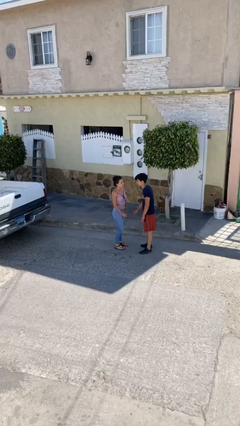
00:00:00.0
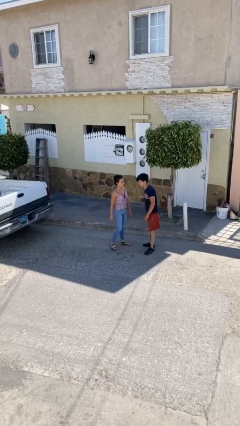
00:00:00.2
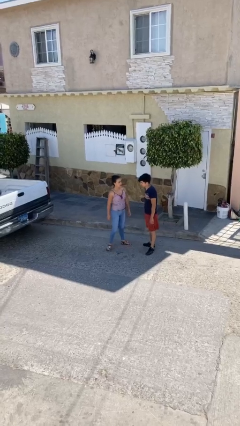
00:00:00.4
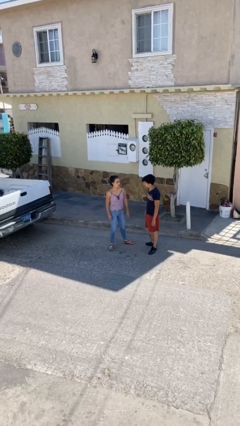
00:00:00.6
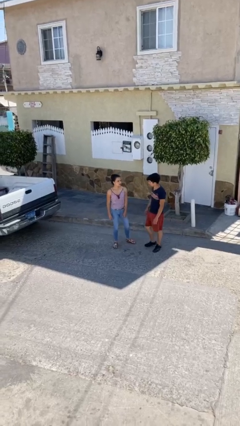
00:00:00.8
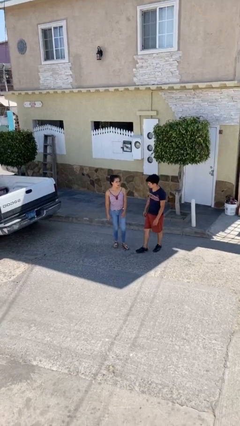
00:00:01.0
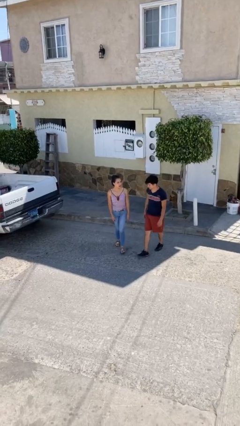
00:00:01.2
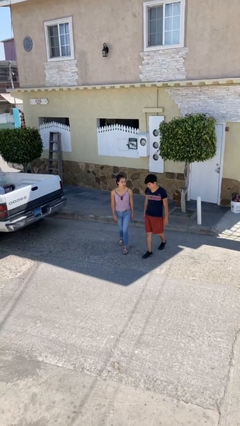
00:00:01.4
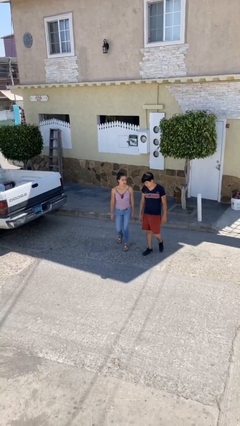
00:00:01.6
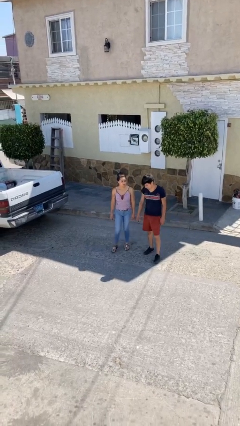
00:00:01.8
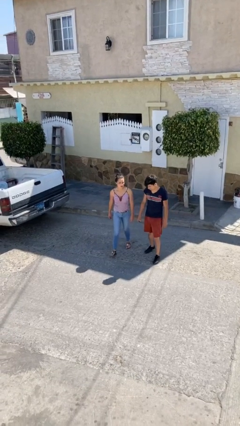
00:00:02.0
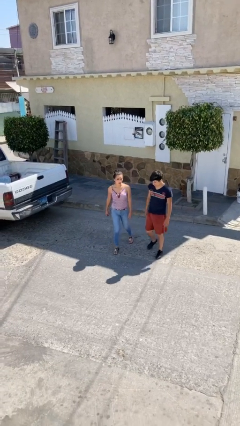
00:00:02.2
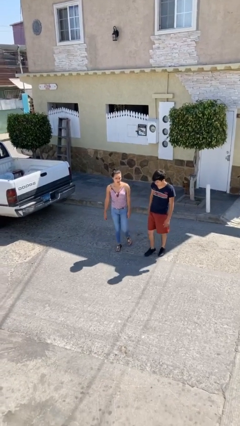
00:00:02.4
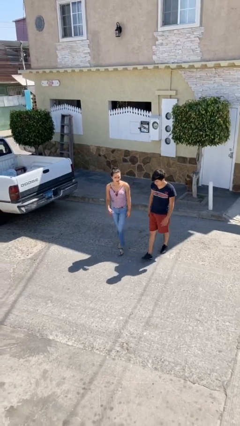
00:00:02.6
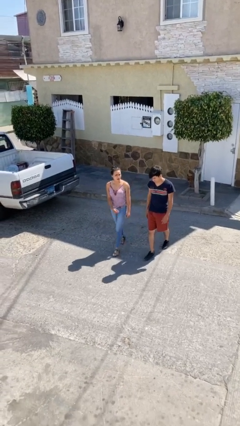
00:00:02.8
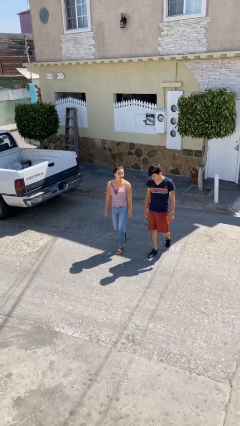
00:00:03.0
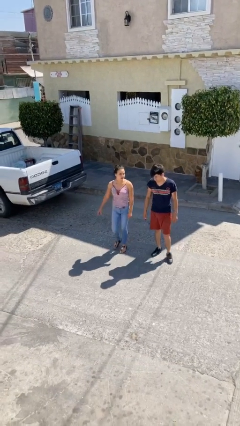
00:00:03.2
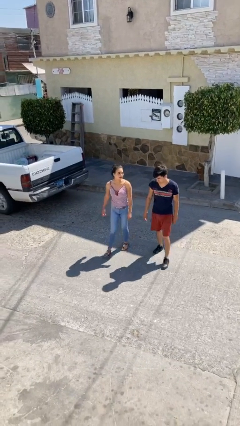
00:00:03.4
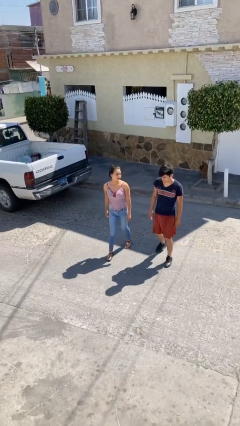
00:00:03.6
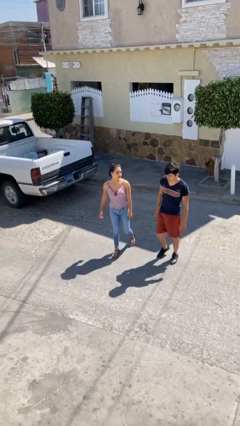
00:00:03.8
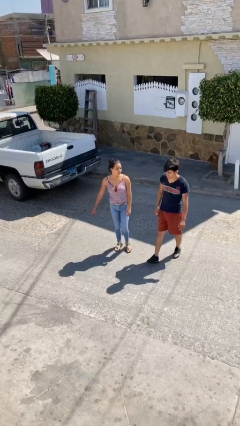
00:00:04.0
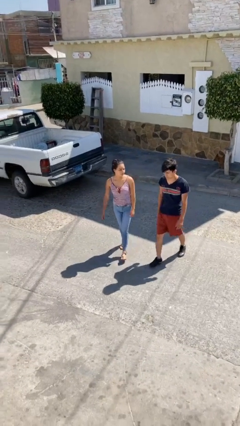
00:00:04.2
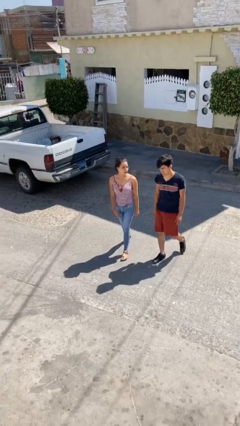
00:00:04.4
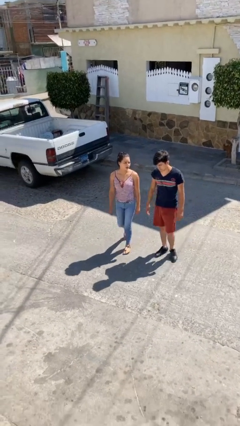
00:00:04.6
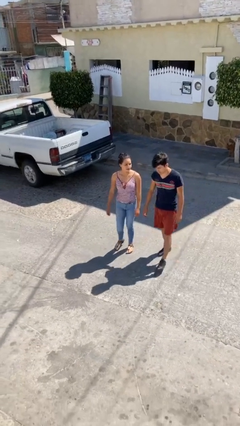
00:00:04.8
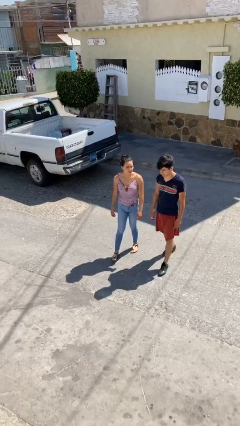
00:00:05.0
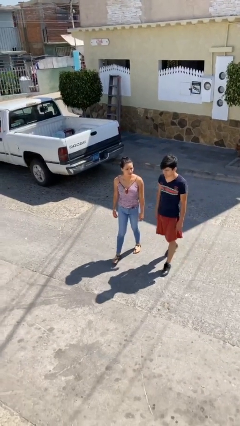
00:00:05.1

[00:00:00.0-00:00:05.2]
person talks to person

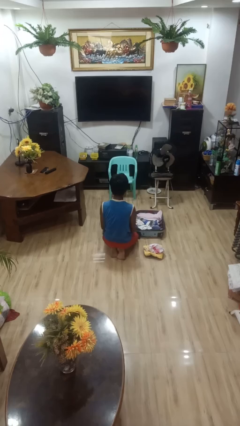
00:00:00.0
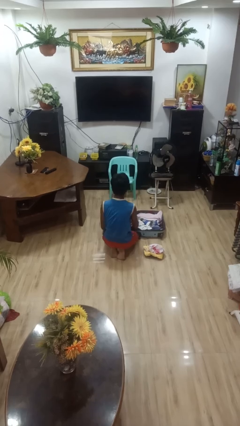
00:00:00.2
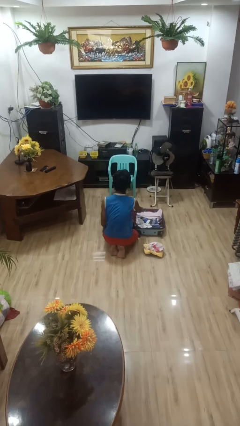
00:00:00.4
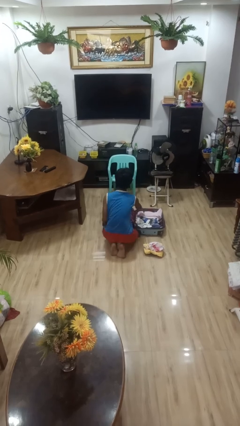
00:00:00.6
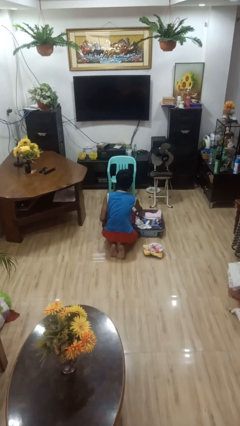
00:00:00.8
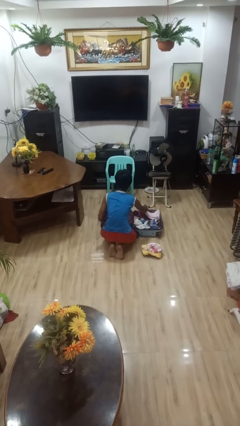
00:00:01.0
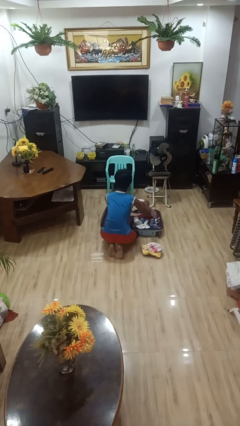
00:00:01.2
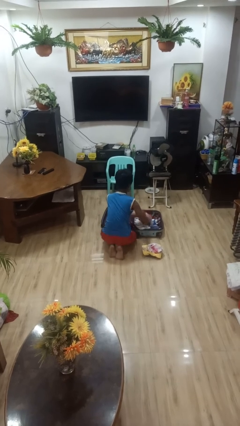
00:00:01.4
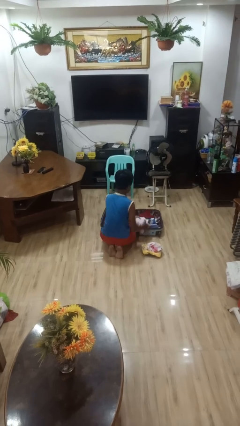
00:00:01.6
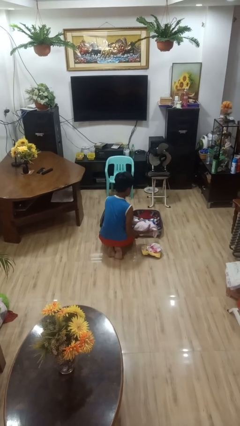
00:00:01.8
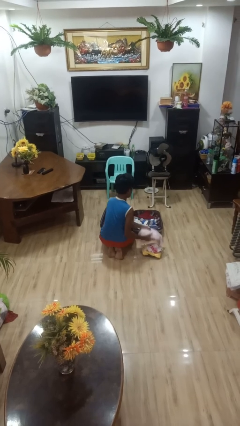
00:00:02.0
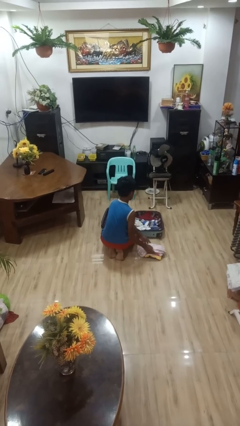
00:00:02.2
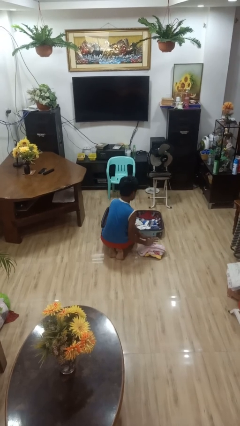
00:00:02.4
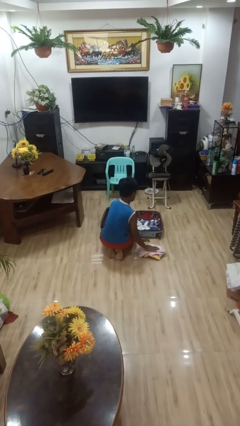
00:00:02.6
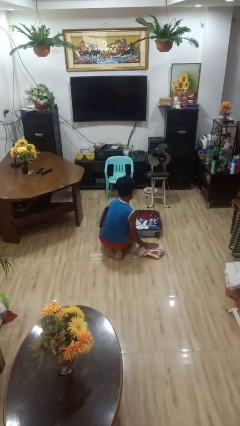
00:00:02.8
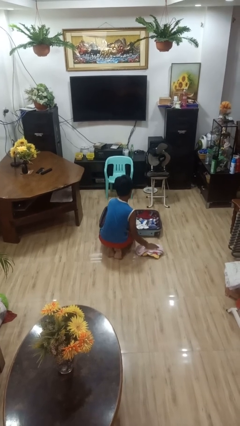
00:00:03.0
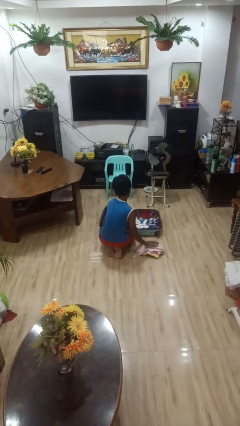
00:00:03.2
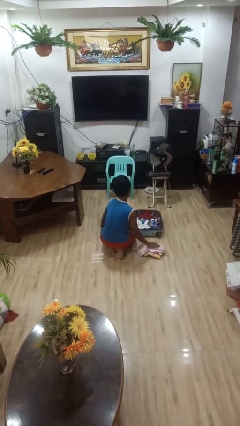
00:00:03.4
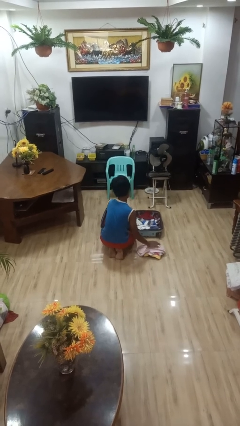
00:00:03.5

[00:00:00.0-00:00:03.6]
person unloads clothes from suitcase

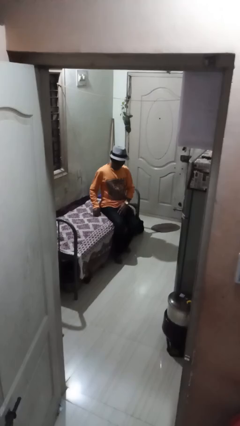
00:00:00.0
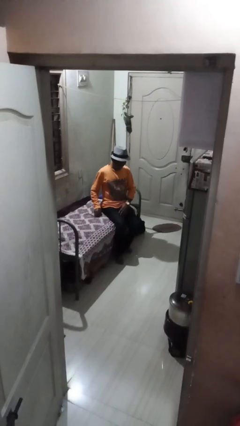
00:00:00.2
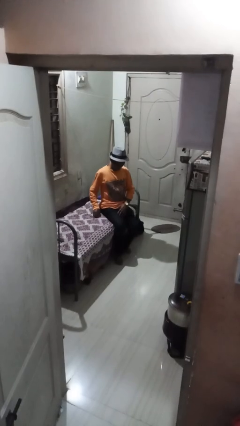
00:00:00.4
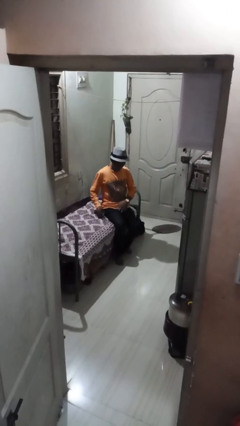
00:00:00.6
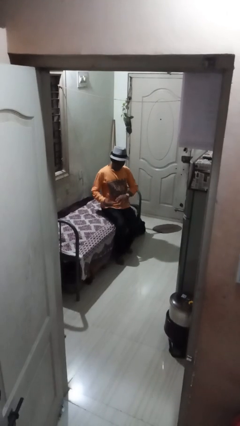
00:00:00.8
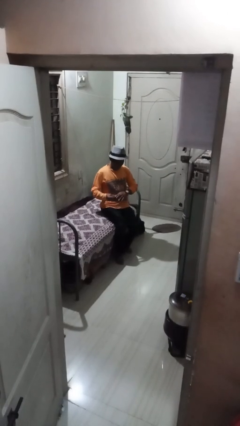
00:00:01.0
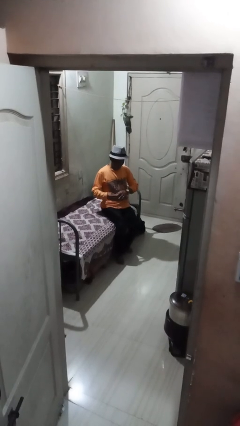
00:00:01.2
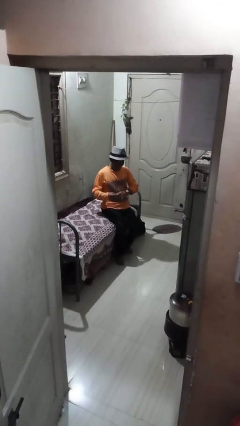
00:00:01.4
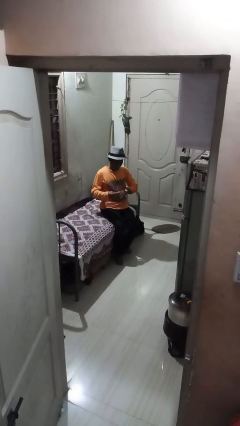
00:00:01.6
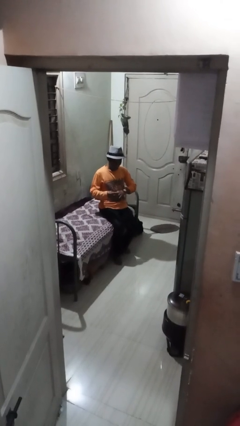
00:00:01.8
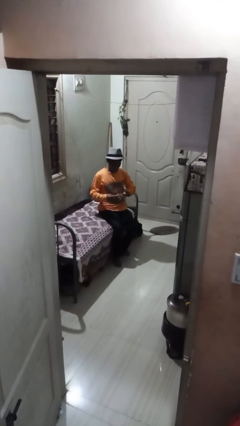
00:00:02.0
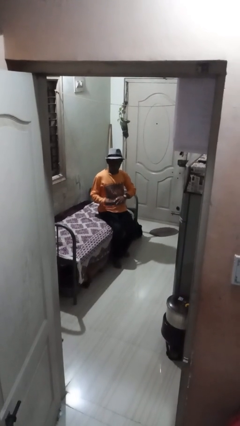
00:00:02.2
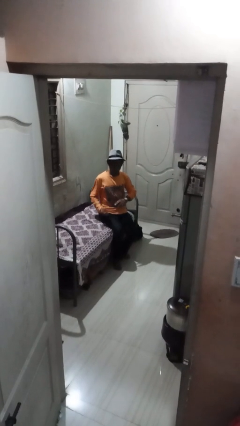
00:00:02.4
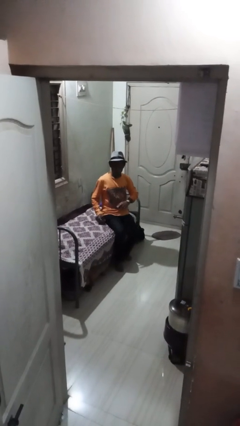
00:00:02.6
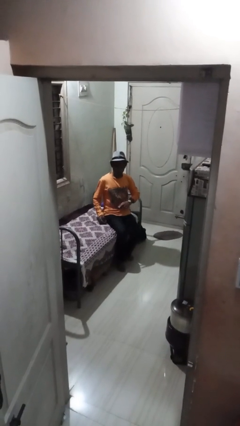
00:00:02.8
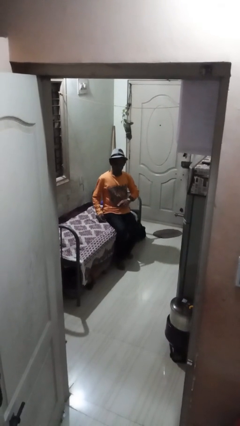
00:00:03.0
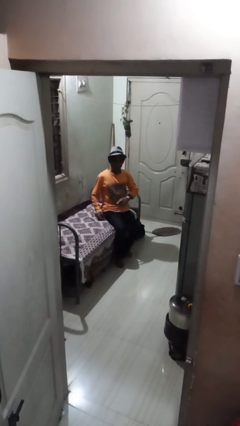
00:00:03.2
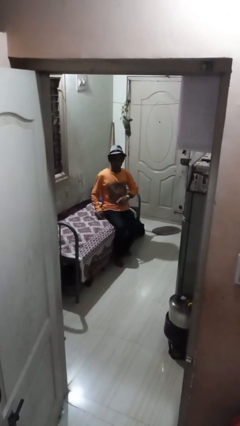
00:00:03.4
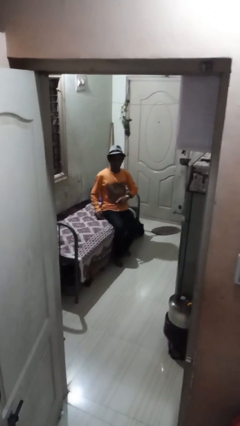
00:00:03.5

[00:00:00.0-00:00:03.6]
person puts on ring

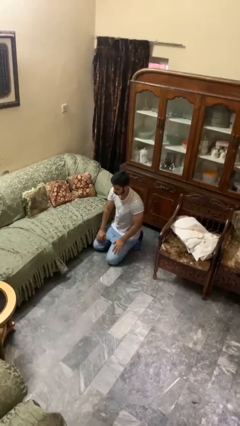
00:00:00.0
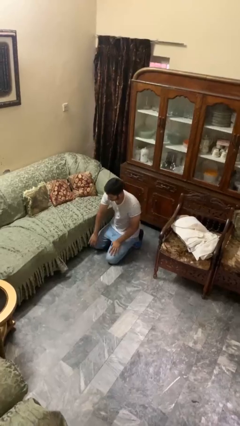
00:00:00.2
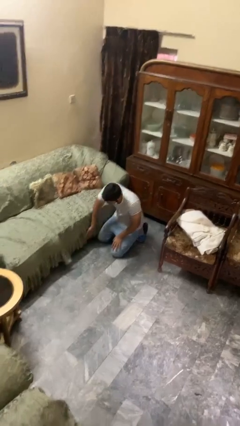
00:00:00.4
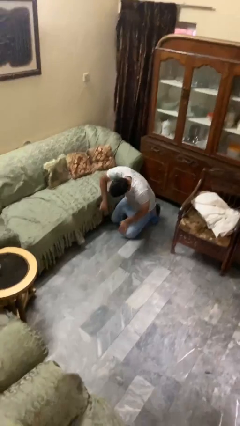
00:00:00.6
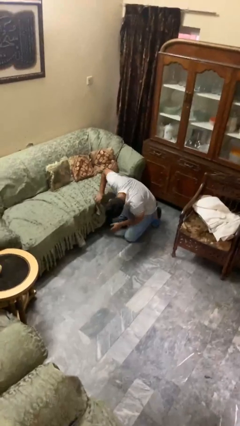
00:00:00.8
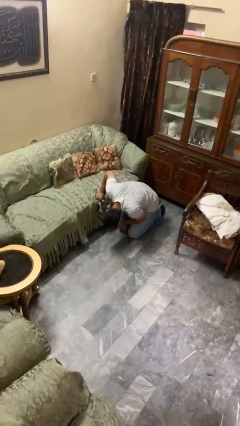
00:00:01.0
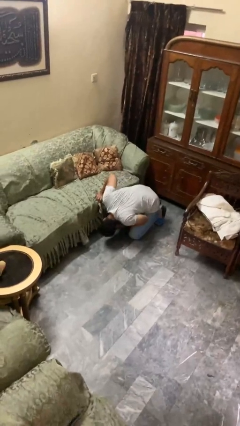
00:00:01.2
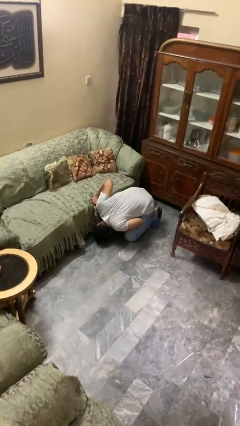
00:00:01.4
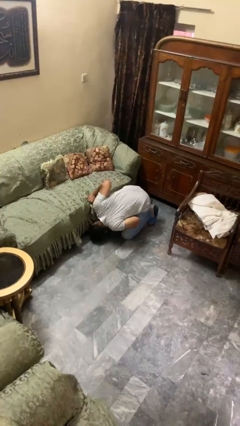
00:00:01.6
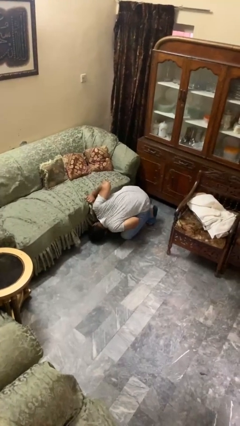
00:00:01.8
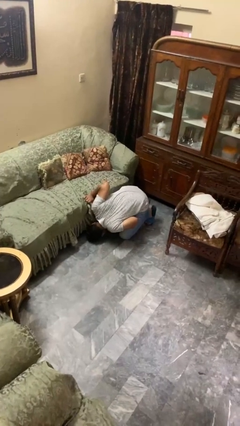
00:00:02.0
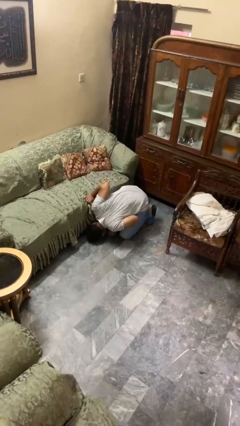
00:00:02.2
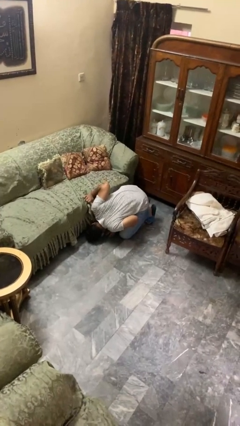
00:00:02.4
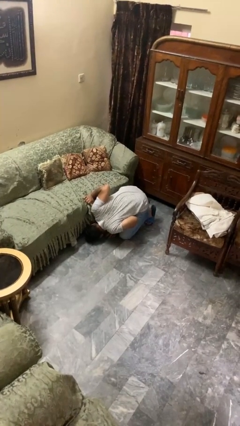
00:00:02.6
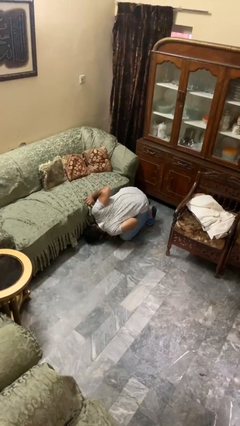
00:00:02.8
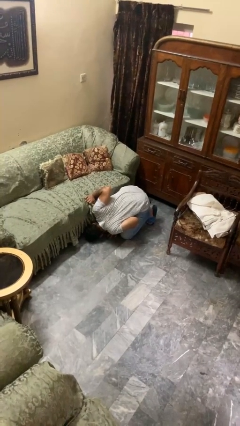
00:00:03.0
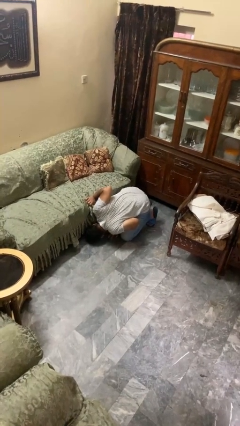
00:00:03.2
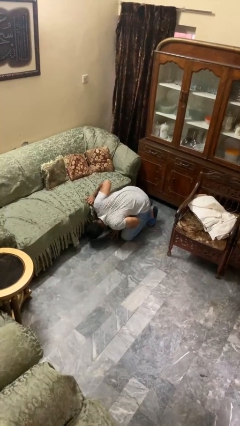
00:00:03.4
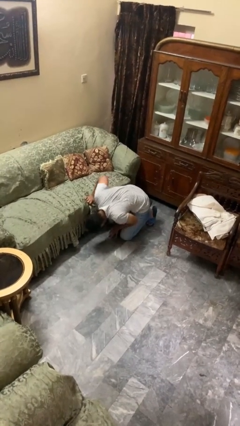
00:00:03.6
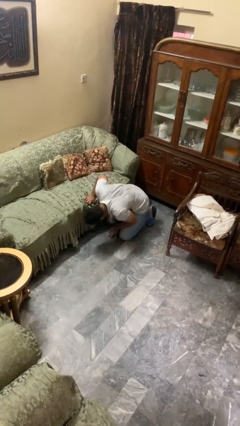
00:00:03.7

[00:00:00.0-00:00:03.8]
person searches under couch

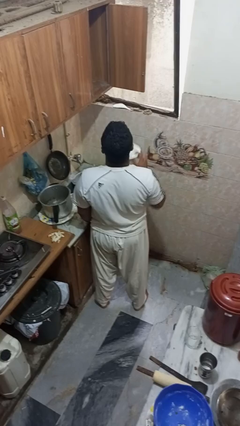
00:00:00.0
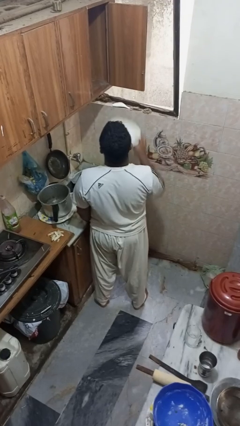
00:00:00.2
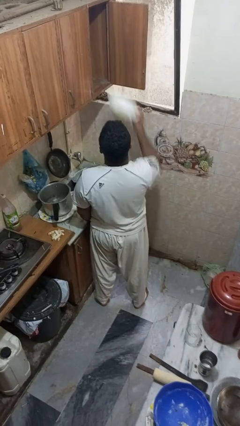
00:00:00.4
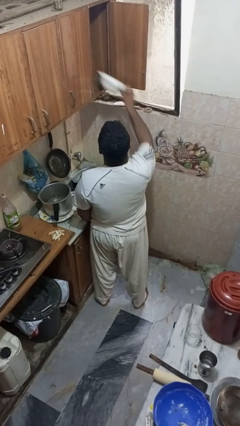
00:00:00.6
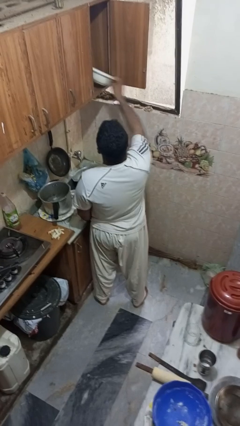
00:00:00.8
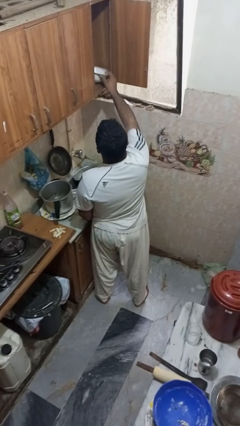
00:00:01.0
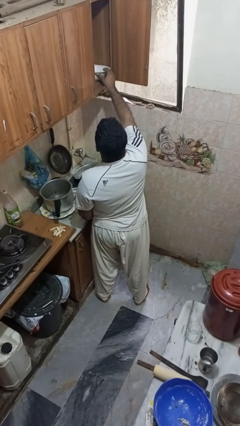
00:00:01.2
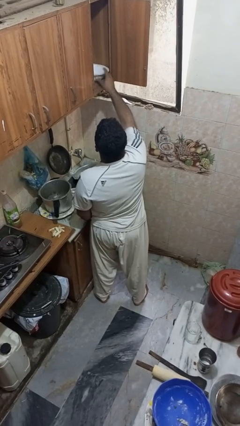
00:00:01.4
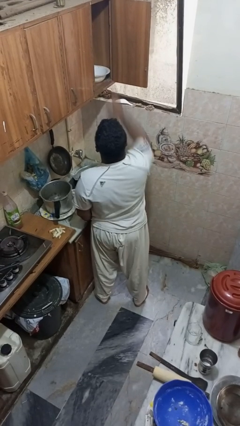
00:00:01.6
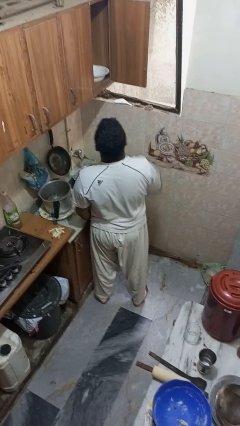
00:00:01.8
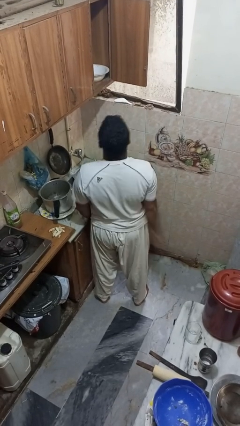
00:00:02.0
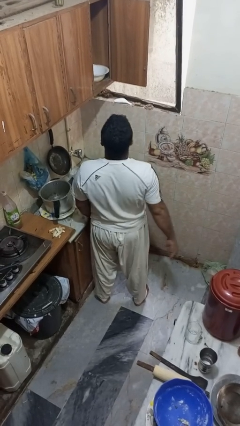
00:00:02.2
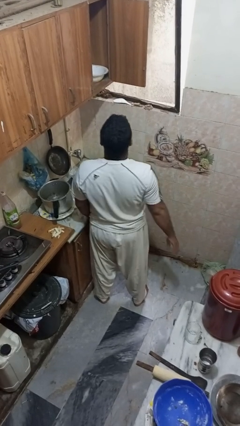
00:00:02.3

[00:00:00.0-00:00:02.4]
person puts object in cabinet
